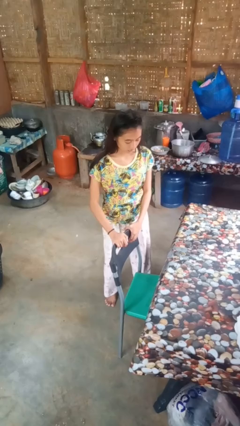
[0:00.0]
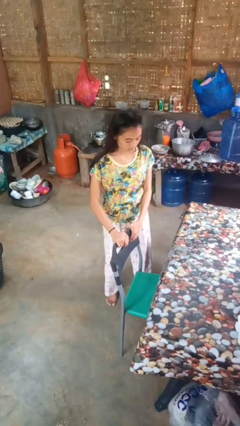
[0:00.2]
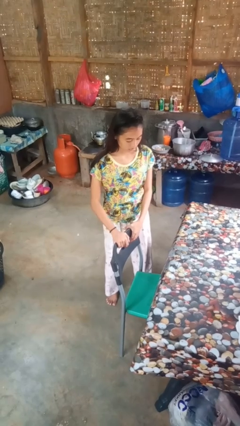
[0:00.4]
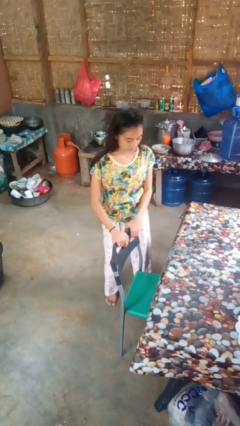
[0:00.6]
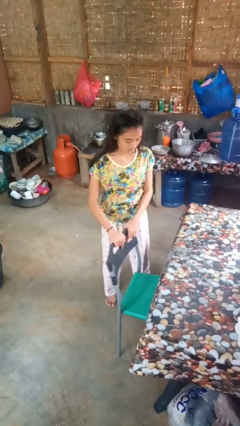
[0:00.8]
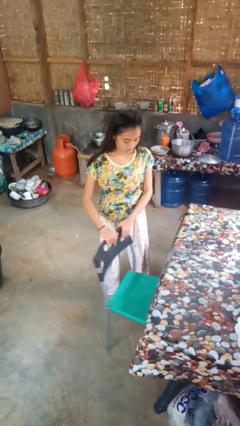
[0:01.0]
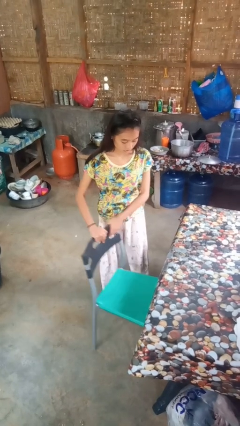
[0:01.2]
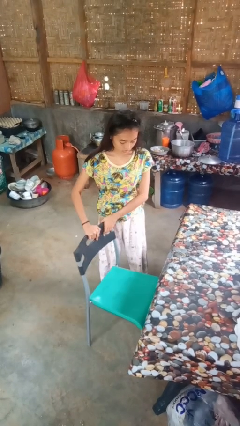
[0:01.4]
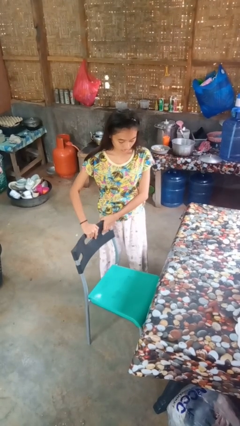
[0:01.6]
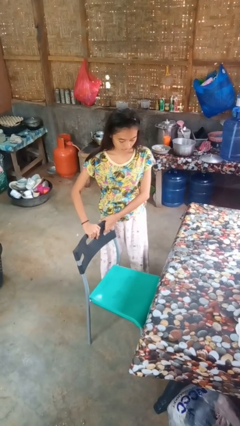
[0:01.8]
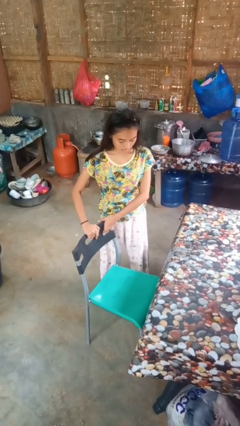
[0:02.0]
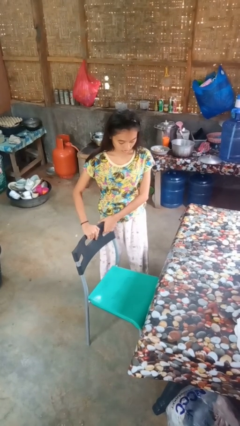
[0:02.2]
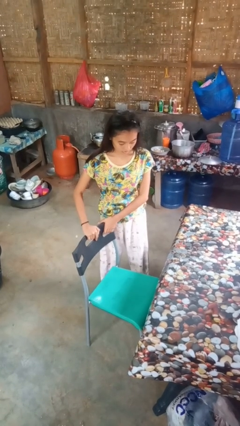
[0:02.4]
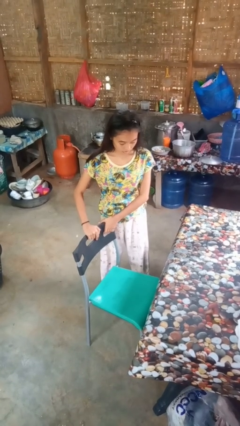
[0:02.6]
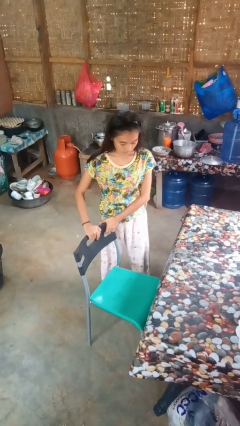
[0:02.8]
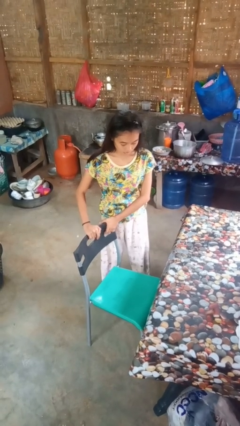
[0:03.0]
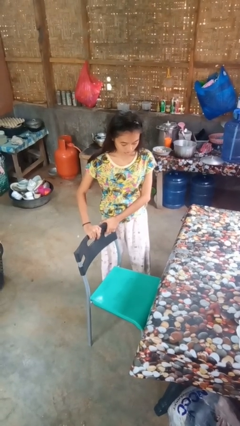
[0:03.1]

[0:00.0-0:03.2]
person pulls out chair

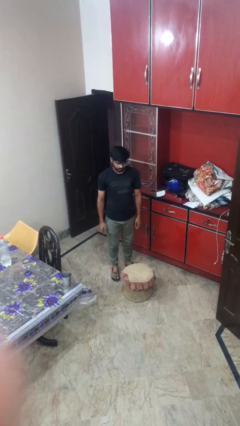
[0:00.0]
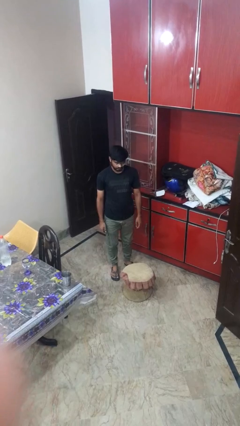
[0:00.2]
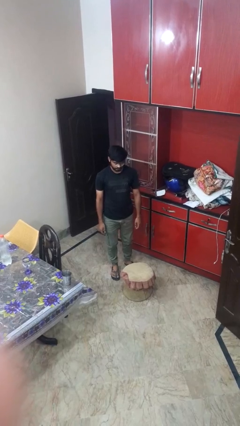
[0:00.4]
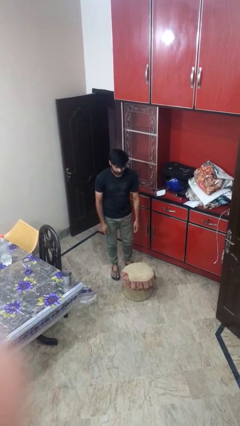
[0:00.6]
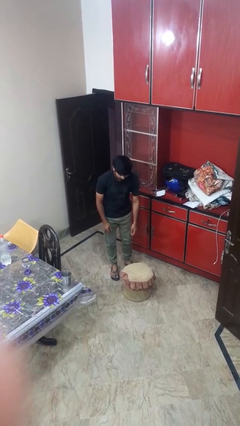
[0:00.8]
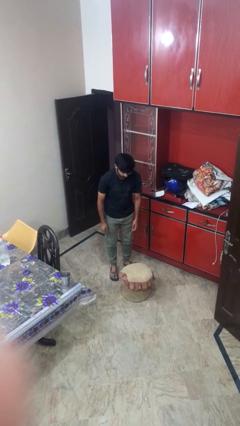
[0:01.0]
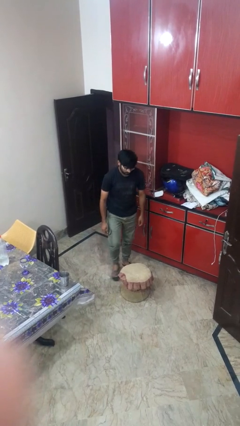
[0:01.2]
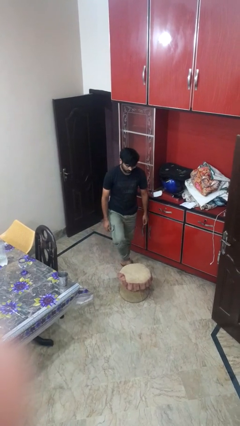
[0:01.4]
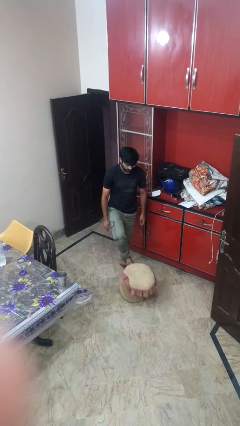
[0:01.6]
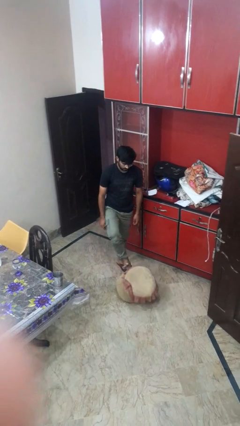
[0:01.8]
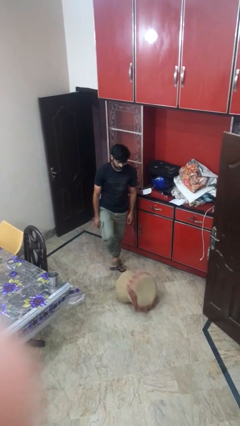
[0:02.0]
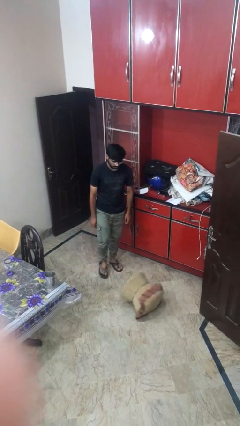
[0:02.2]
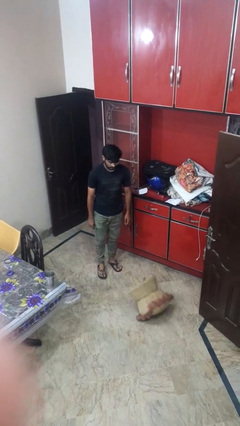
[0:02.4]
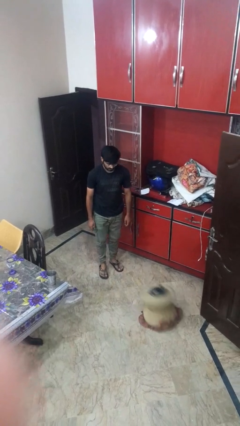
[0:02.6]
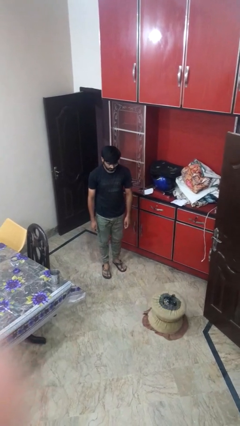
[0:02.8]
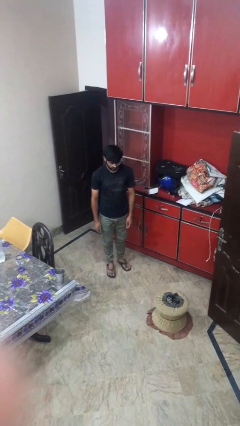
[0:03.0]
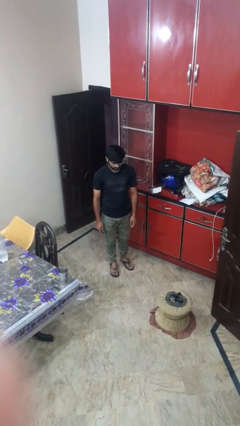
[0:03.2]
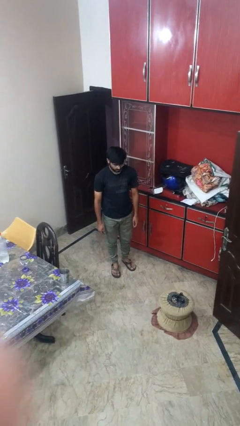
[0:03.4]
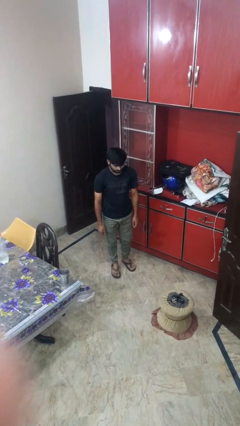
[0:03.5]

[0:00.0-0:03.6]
person knocks over furniture

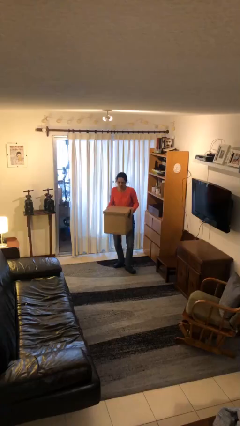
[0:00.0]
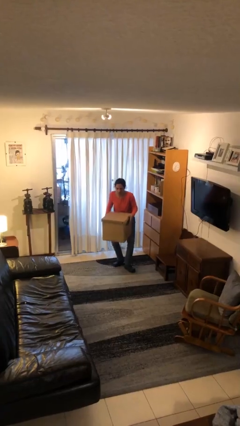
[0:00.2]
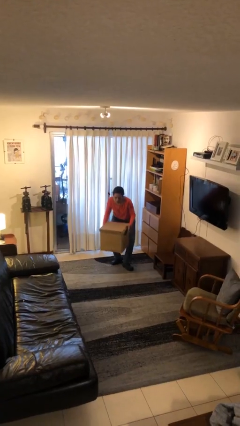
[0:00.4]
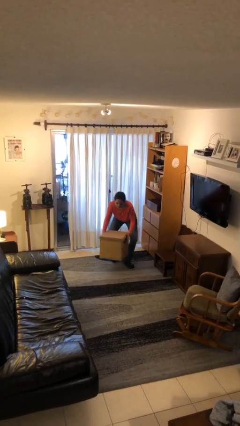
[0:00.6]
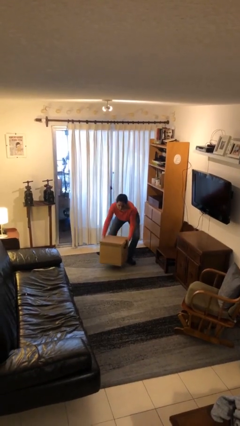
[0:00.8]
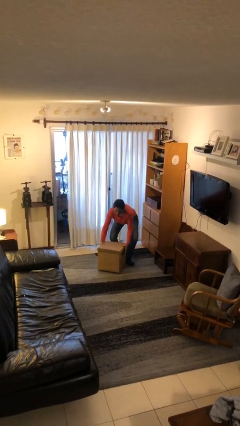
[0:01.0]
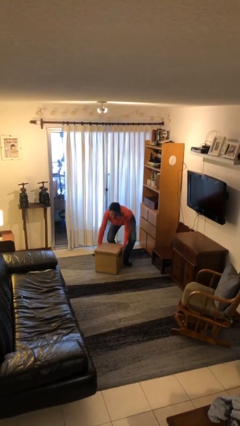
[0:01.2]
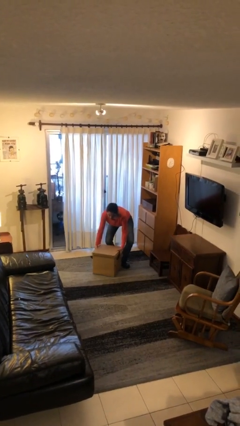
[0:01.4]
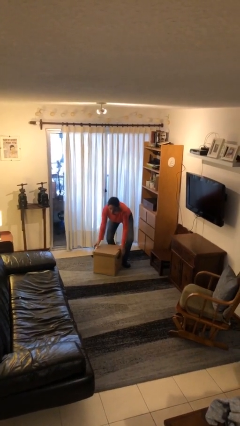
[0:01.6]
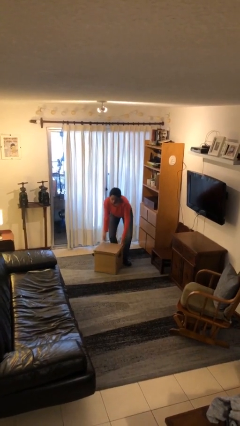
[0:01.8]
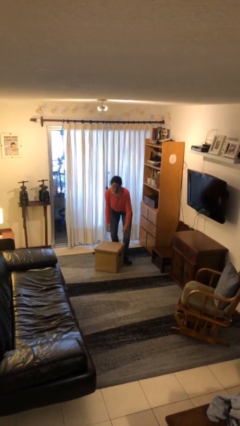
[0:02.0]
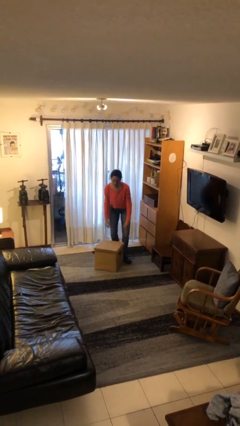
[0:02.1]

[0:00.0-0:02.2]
person puts down object on floor

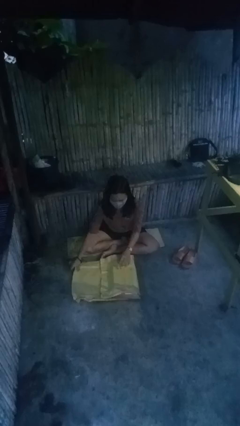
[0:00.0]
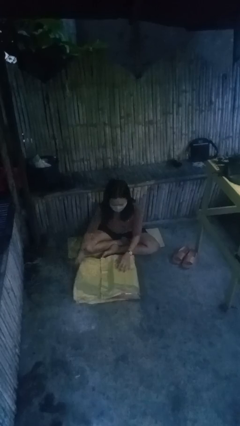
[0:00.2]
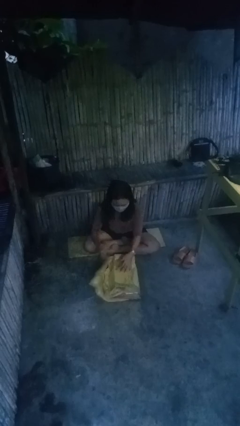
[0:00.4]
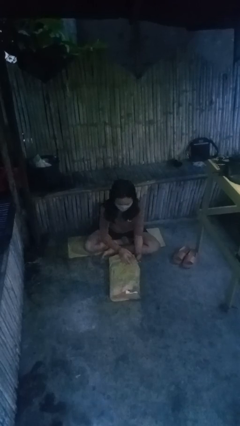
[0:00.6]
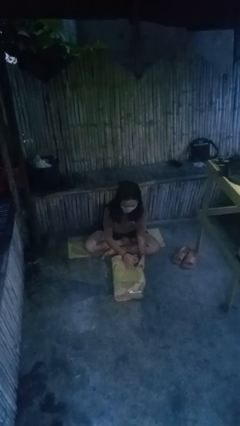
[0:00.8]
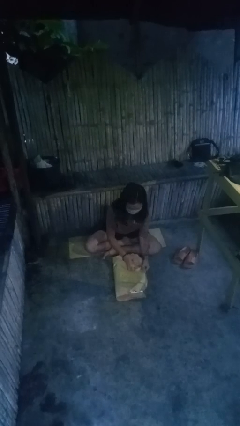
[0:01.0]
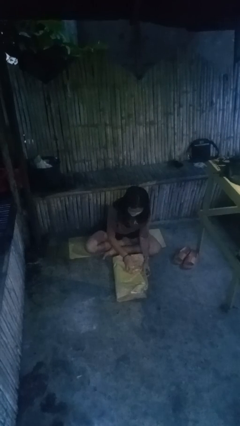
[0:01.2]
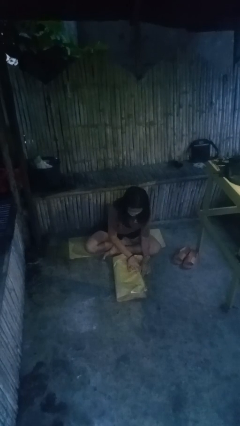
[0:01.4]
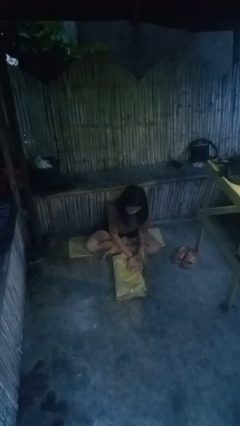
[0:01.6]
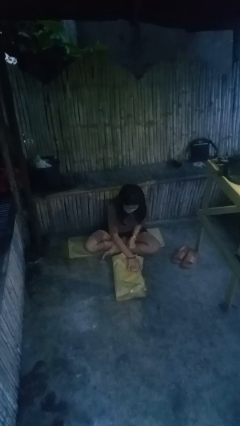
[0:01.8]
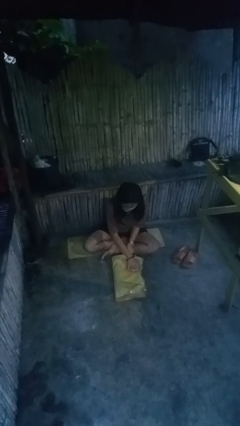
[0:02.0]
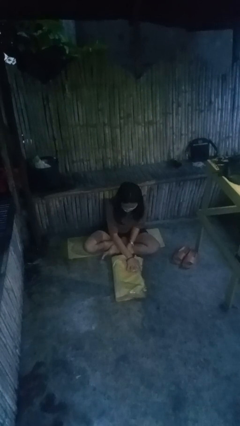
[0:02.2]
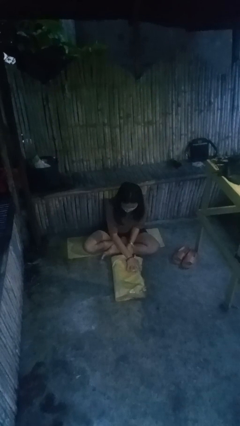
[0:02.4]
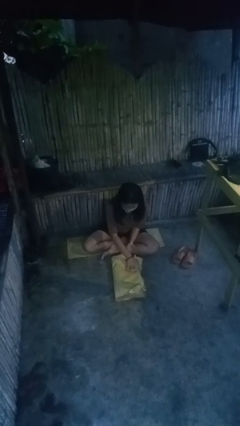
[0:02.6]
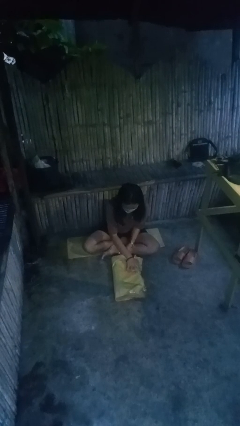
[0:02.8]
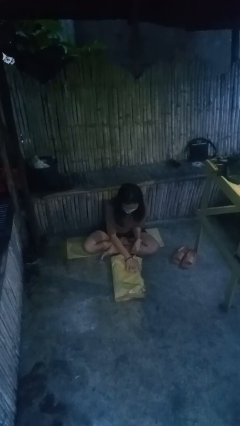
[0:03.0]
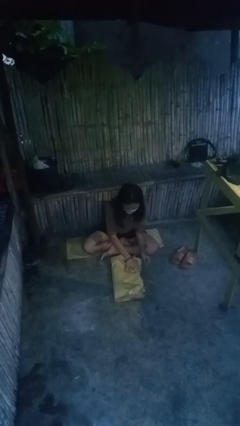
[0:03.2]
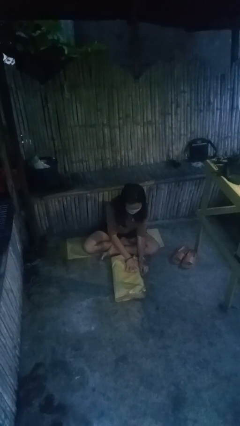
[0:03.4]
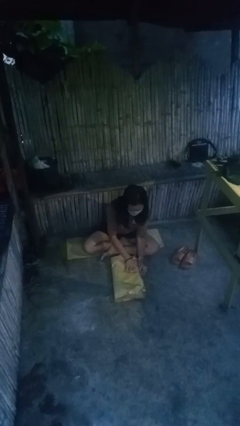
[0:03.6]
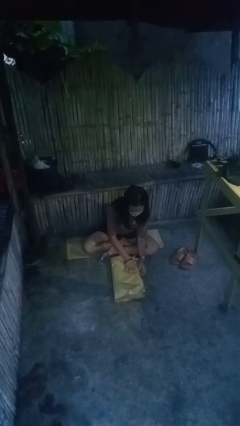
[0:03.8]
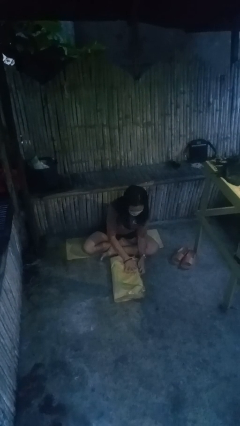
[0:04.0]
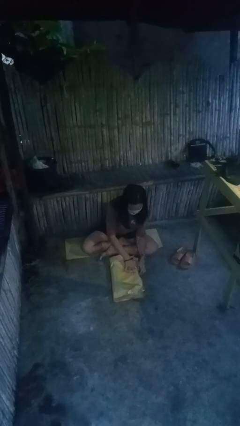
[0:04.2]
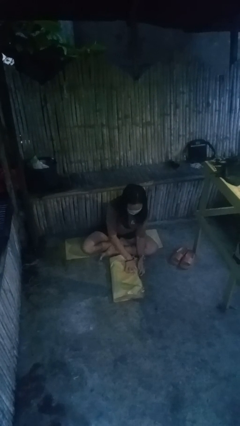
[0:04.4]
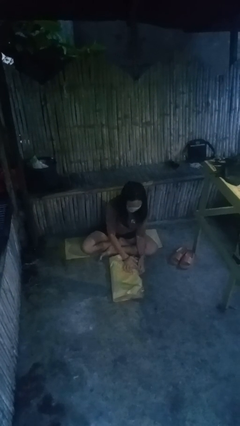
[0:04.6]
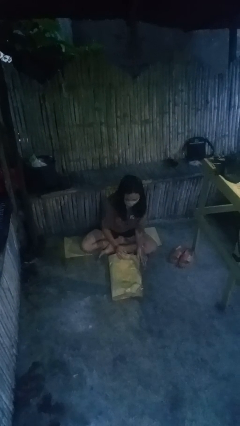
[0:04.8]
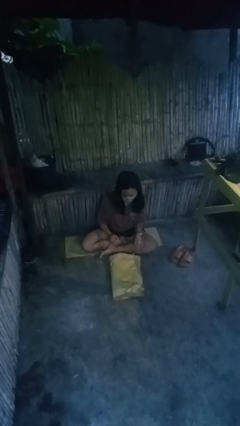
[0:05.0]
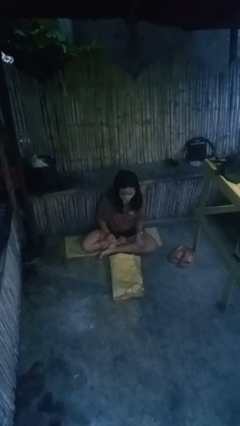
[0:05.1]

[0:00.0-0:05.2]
person wraps box

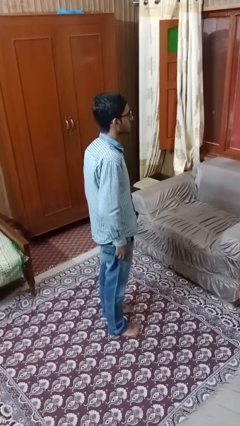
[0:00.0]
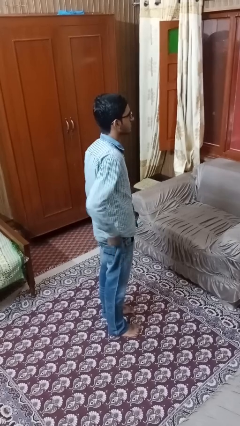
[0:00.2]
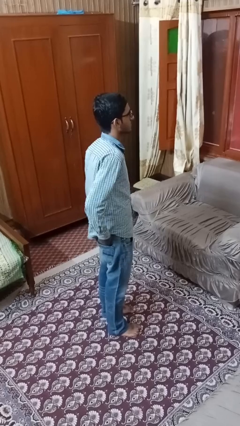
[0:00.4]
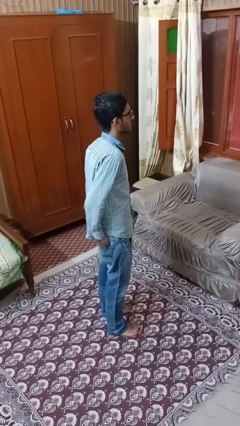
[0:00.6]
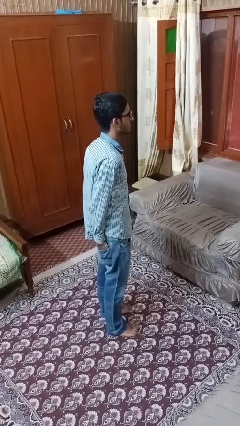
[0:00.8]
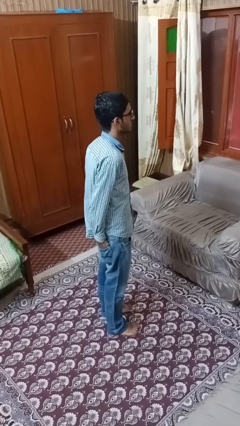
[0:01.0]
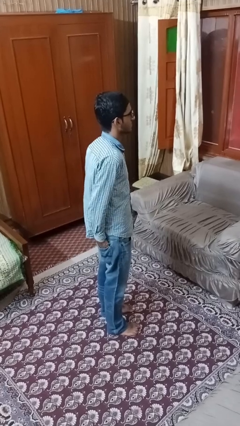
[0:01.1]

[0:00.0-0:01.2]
person puts hands in back pockets

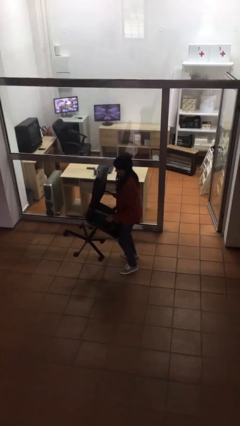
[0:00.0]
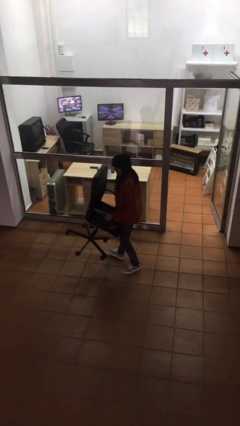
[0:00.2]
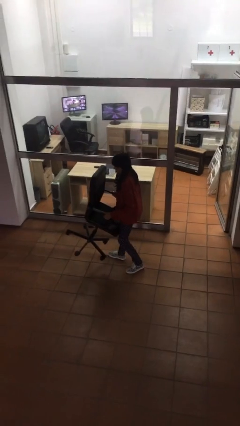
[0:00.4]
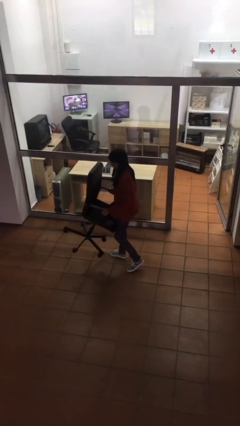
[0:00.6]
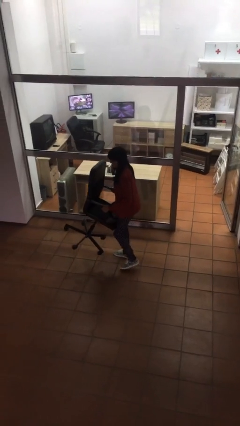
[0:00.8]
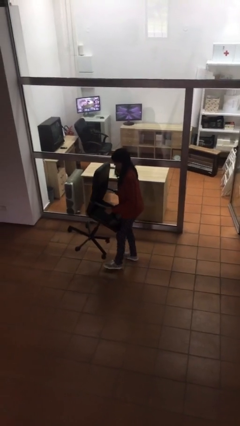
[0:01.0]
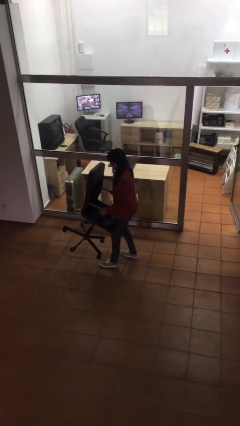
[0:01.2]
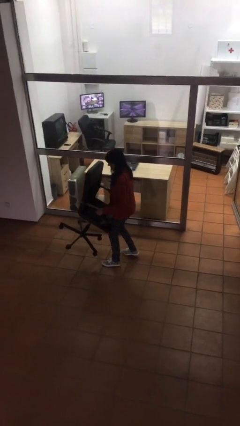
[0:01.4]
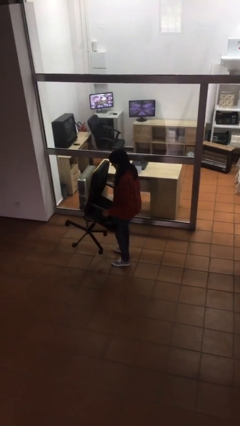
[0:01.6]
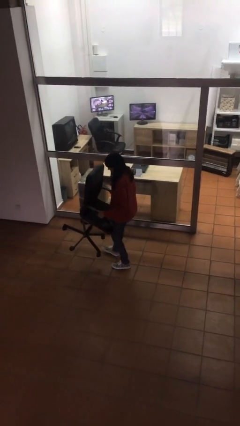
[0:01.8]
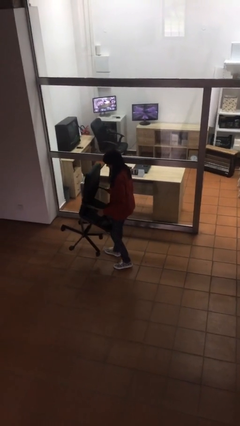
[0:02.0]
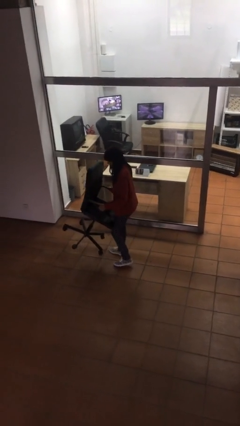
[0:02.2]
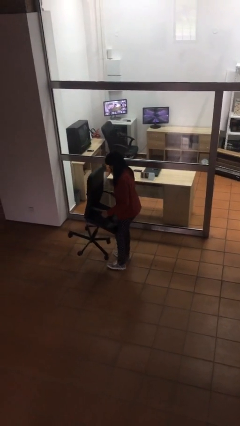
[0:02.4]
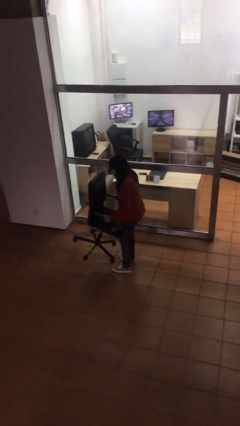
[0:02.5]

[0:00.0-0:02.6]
person carries heavy object
